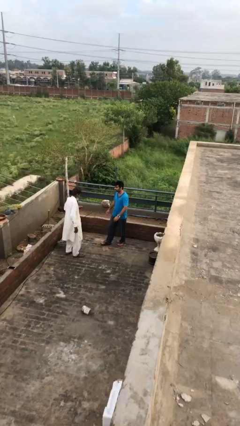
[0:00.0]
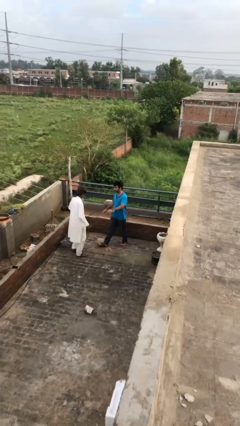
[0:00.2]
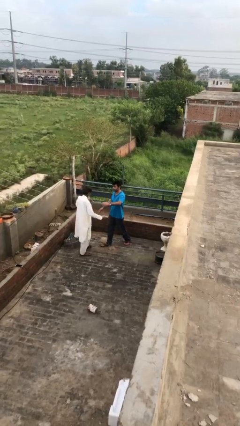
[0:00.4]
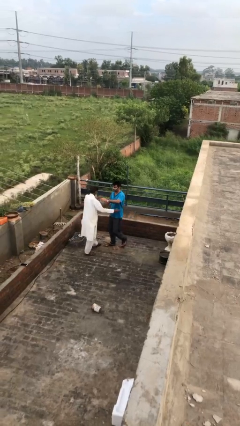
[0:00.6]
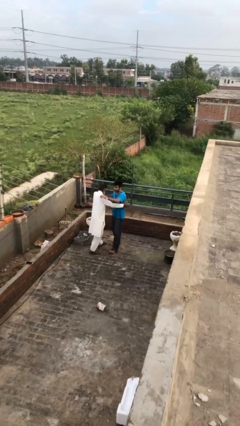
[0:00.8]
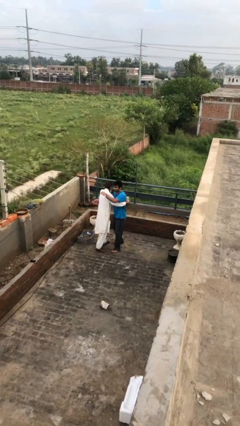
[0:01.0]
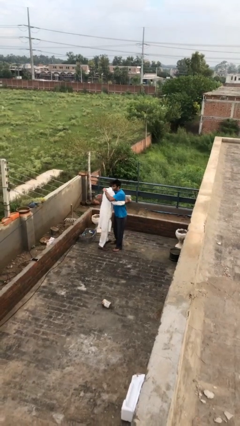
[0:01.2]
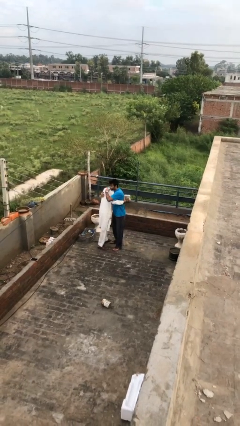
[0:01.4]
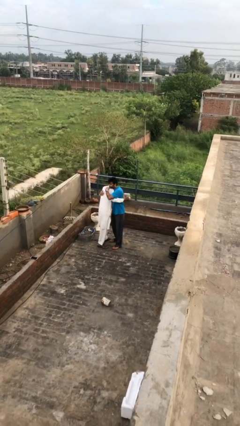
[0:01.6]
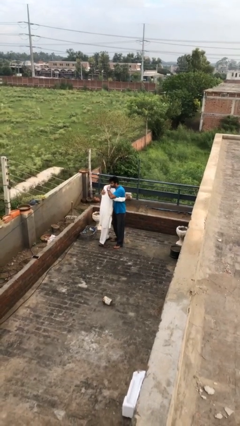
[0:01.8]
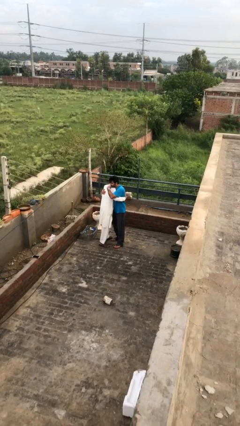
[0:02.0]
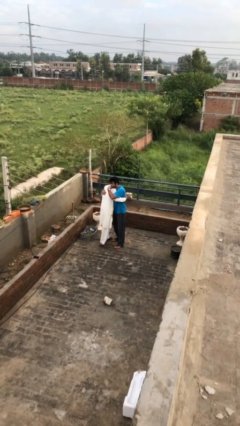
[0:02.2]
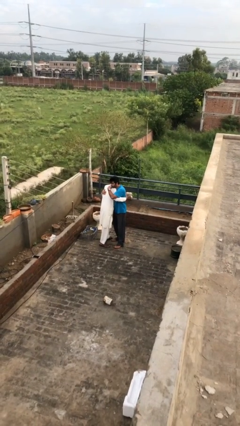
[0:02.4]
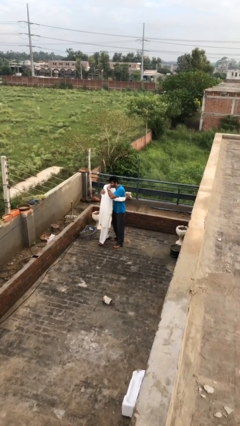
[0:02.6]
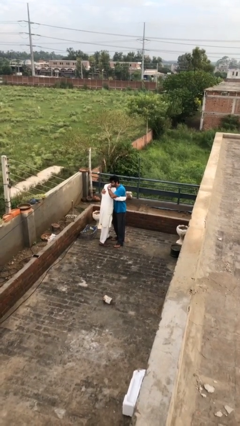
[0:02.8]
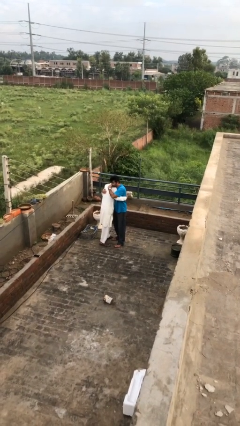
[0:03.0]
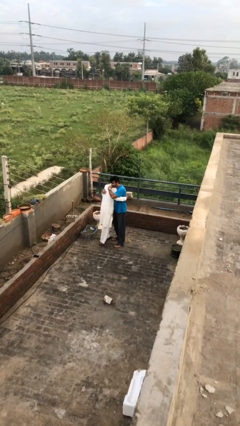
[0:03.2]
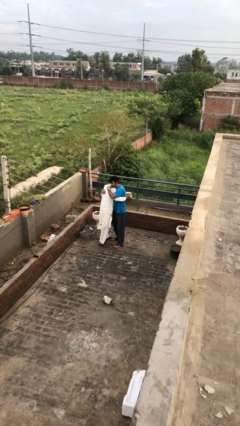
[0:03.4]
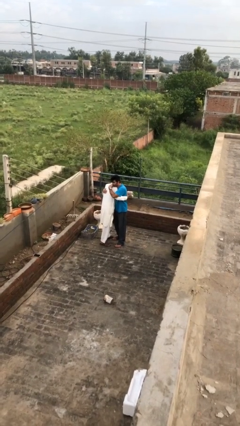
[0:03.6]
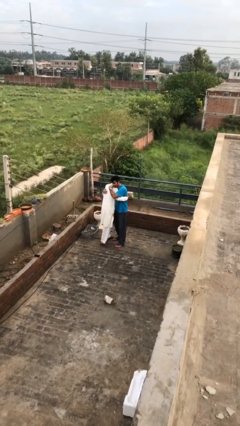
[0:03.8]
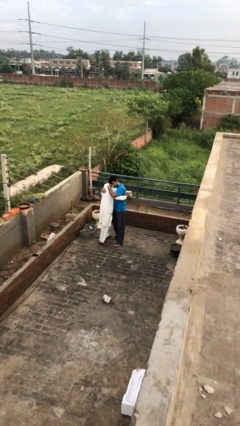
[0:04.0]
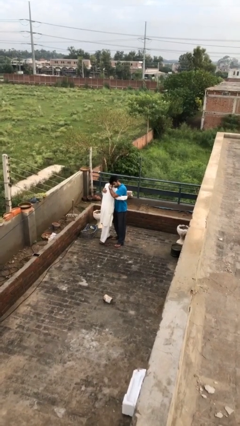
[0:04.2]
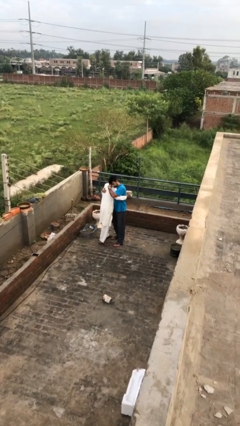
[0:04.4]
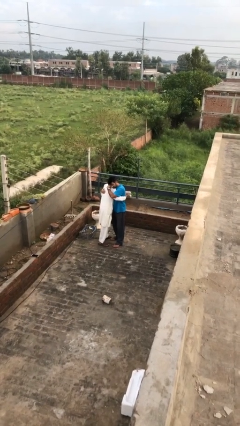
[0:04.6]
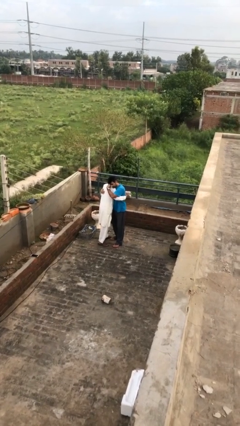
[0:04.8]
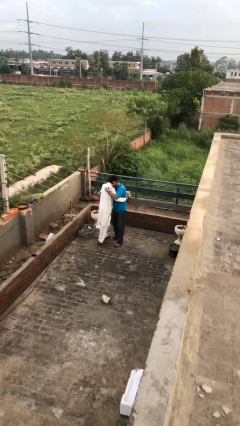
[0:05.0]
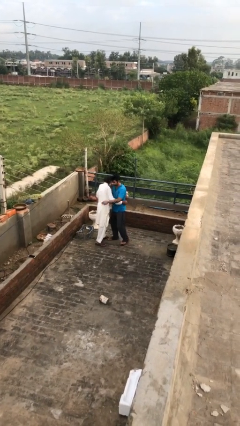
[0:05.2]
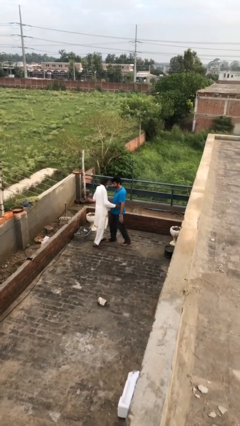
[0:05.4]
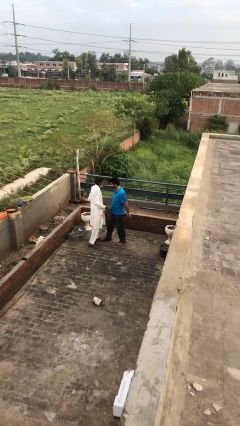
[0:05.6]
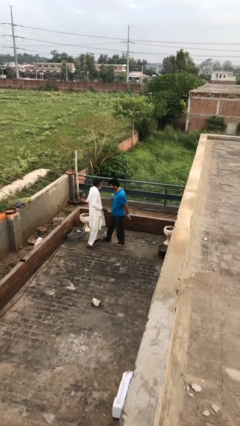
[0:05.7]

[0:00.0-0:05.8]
person embraces person

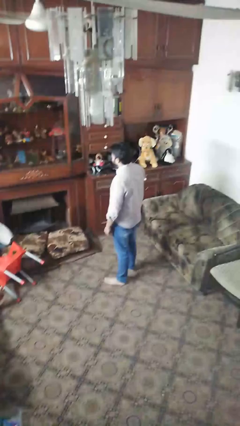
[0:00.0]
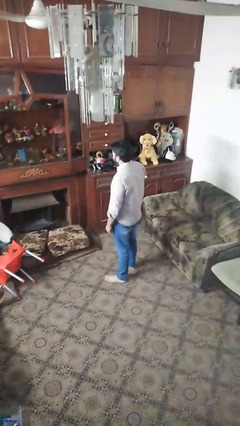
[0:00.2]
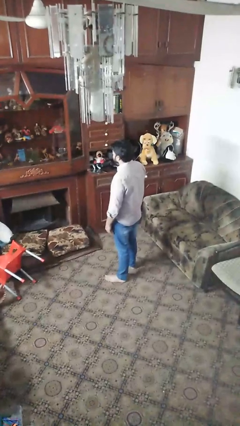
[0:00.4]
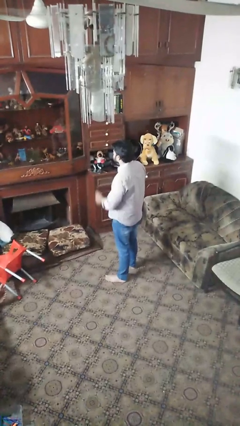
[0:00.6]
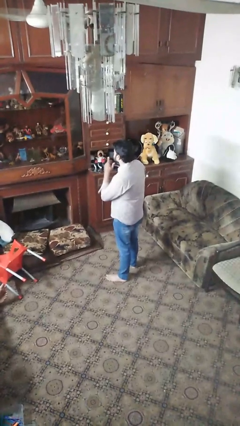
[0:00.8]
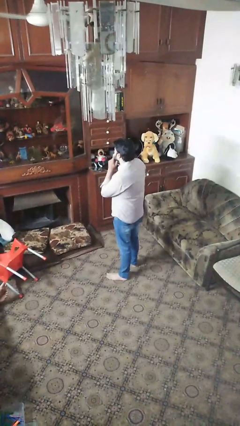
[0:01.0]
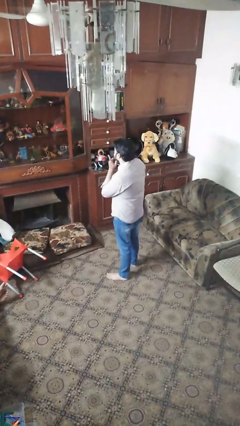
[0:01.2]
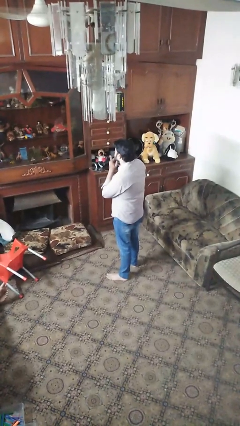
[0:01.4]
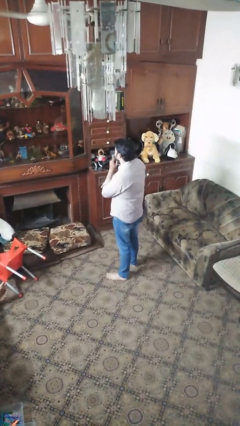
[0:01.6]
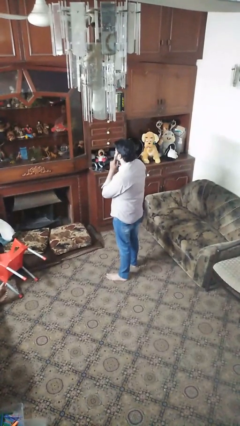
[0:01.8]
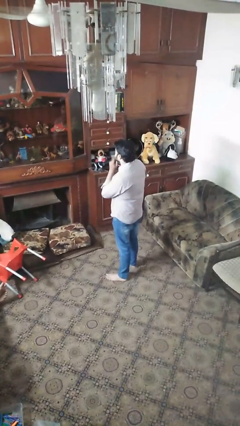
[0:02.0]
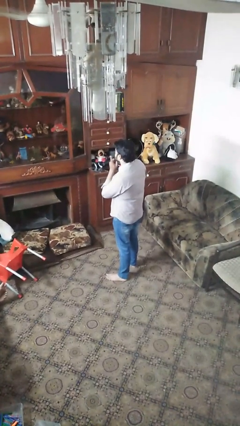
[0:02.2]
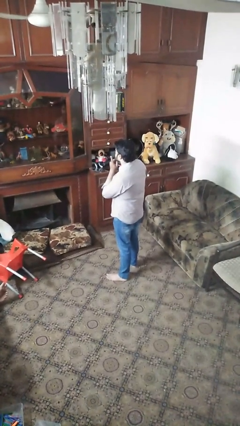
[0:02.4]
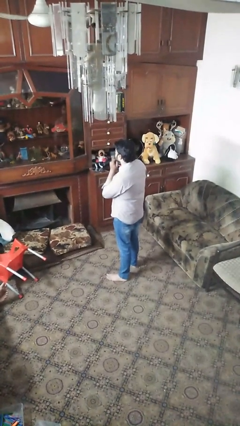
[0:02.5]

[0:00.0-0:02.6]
person strokes chin

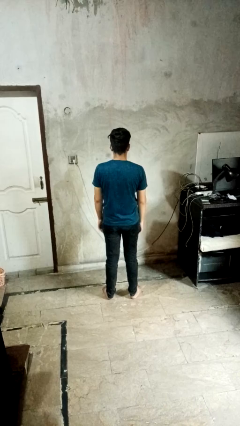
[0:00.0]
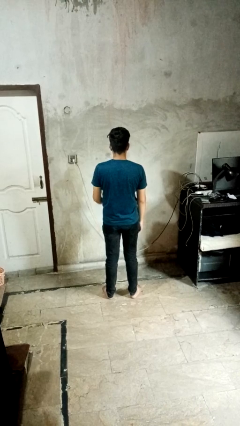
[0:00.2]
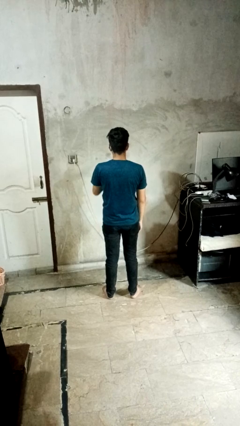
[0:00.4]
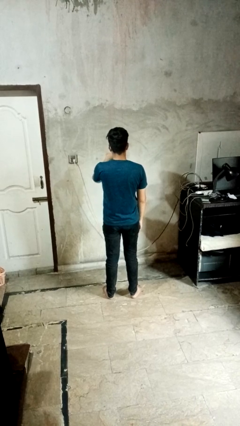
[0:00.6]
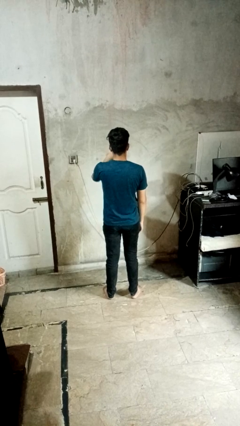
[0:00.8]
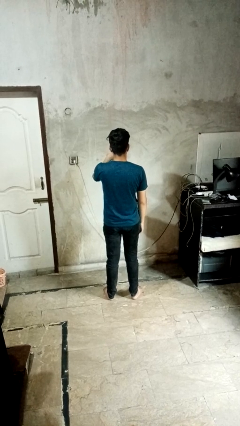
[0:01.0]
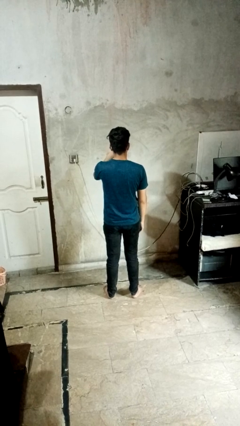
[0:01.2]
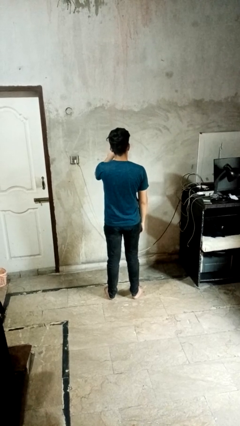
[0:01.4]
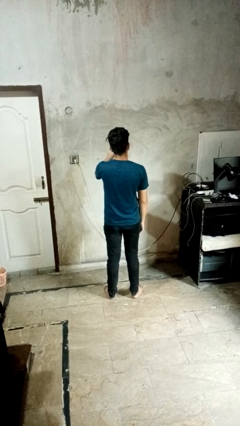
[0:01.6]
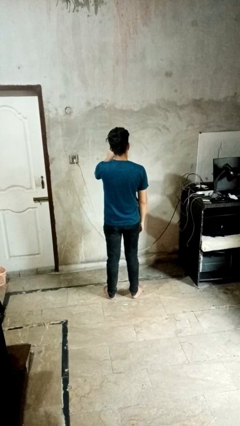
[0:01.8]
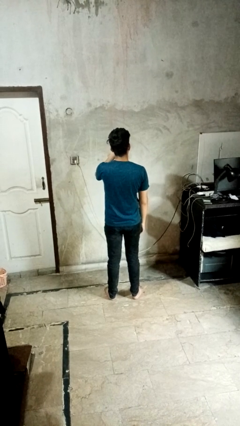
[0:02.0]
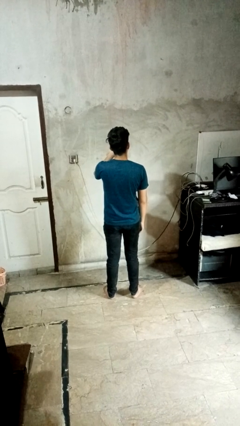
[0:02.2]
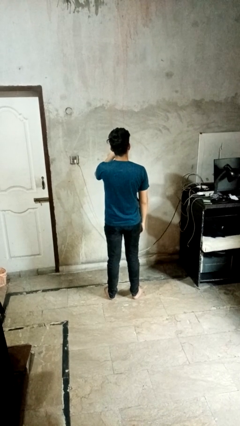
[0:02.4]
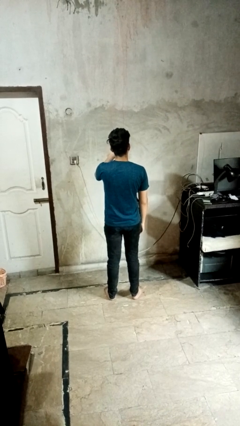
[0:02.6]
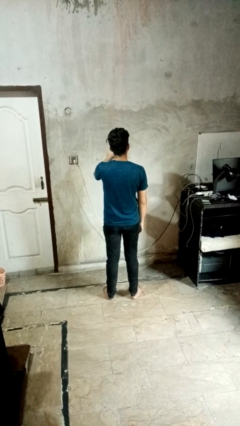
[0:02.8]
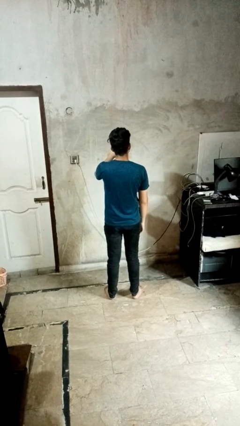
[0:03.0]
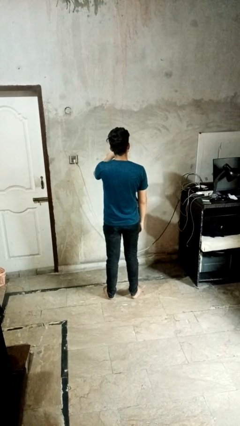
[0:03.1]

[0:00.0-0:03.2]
person yawns

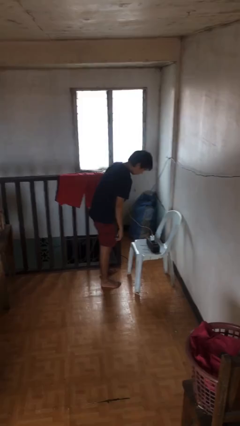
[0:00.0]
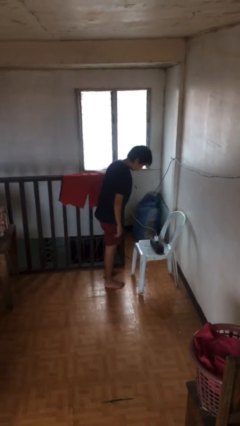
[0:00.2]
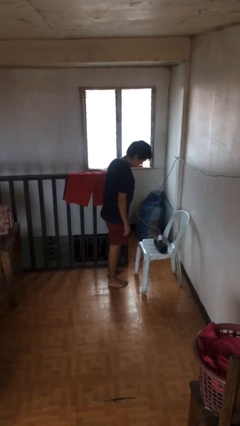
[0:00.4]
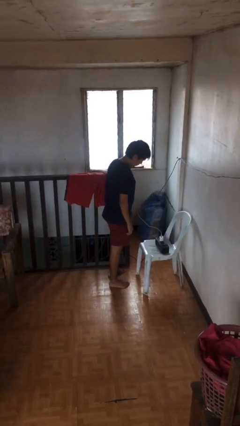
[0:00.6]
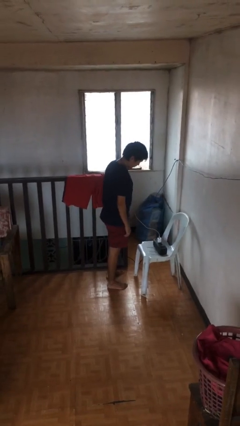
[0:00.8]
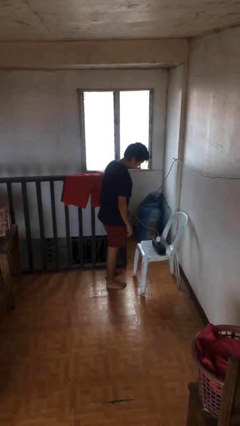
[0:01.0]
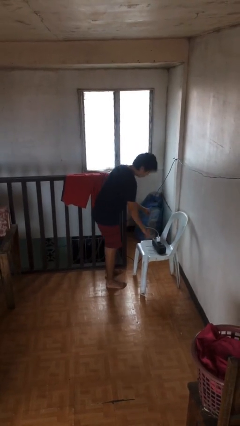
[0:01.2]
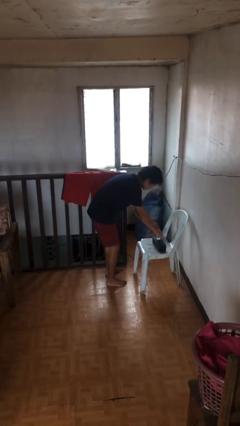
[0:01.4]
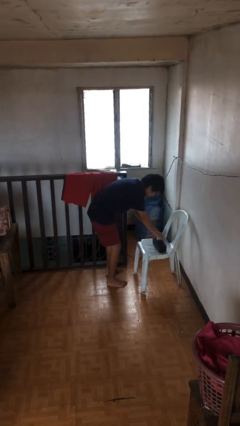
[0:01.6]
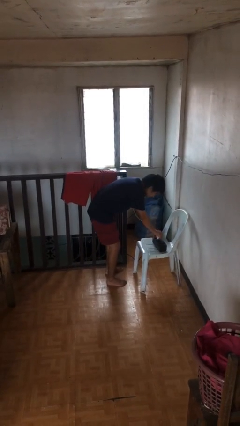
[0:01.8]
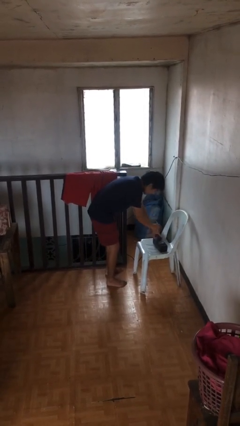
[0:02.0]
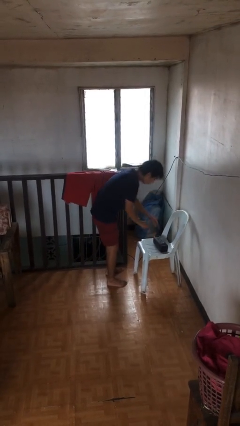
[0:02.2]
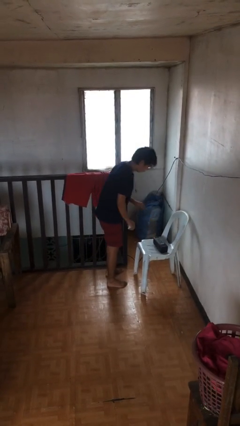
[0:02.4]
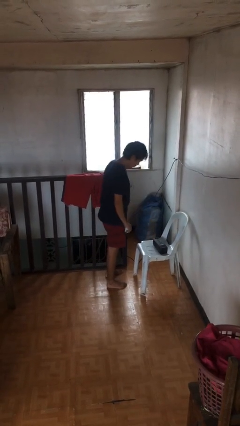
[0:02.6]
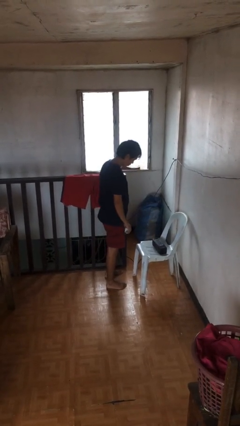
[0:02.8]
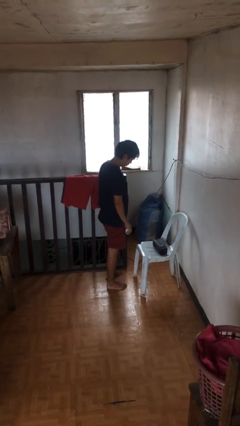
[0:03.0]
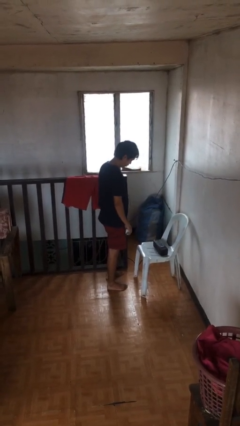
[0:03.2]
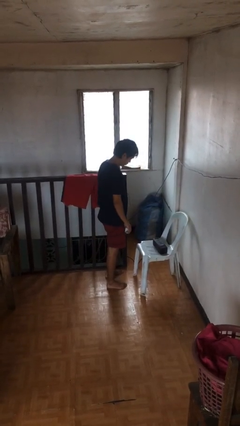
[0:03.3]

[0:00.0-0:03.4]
person unplugs from electrical socket

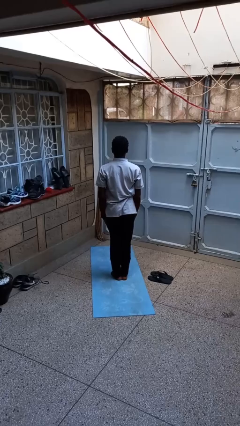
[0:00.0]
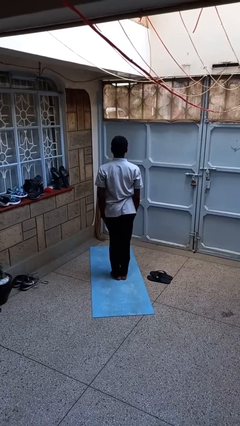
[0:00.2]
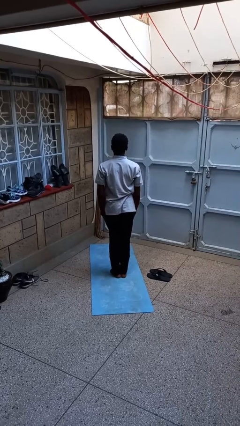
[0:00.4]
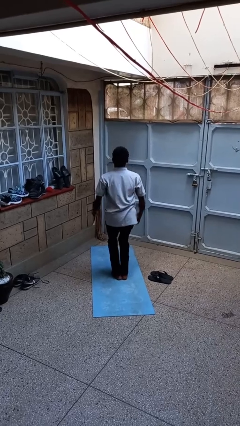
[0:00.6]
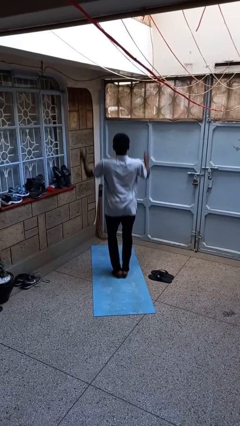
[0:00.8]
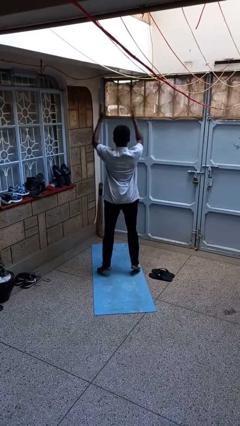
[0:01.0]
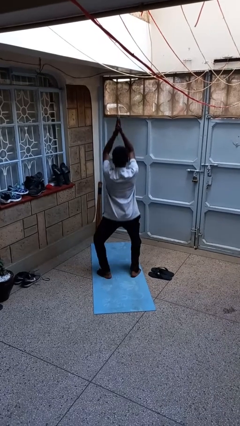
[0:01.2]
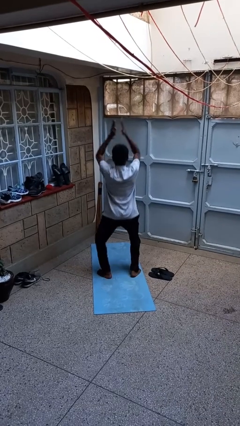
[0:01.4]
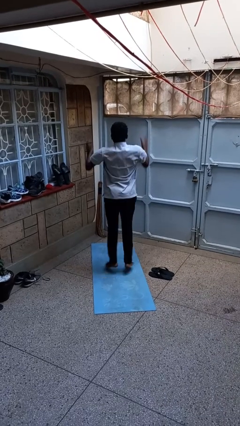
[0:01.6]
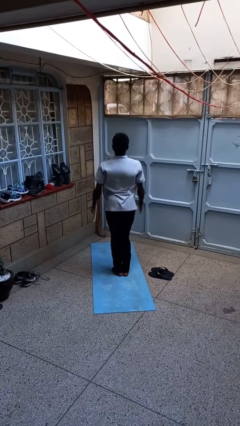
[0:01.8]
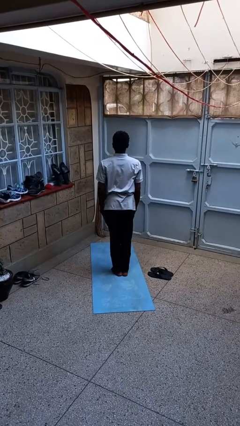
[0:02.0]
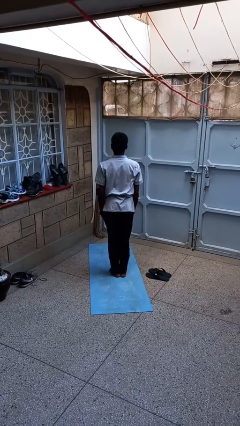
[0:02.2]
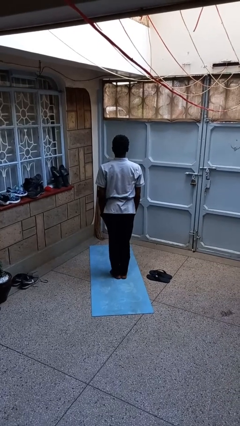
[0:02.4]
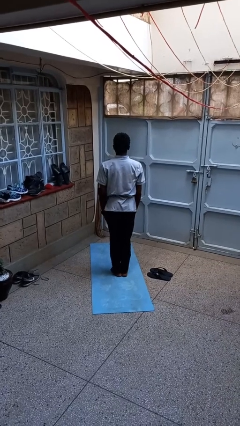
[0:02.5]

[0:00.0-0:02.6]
person exercises with jumping jacks
